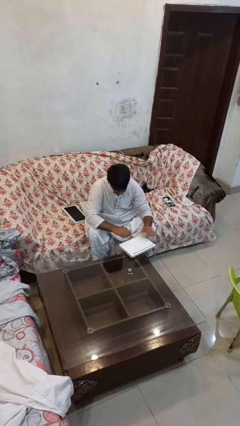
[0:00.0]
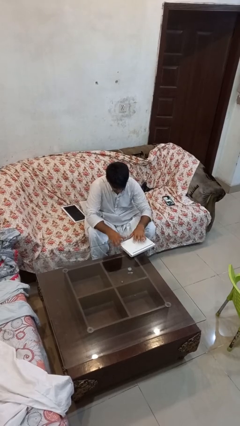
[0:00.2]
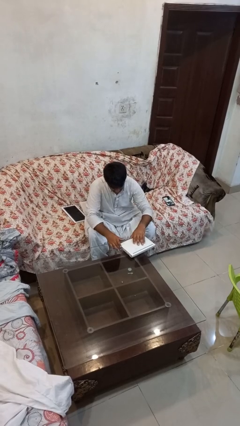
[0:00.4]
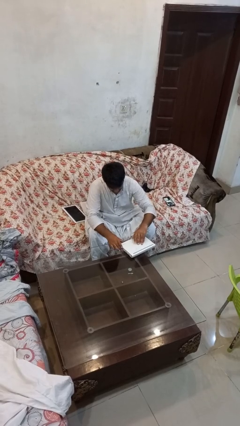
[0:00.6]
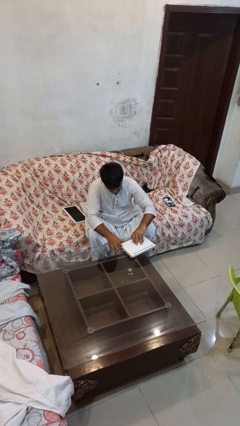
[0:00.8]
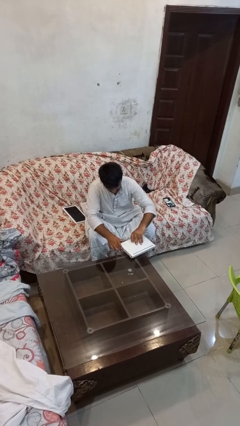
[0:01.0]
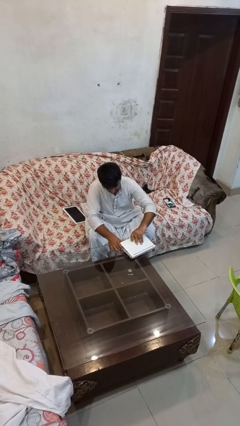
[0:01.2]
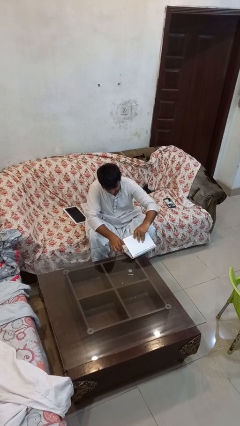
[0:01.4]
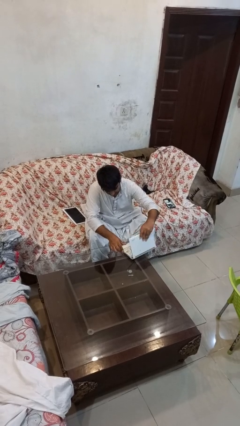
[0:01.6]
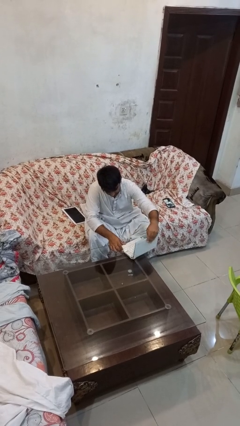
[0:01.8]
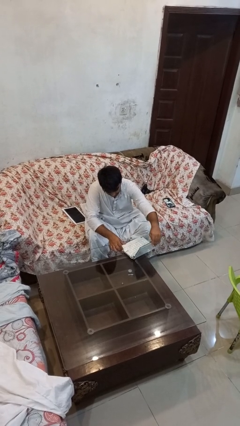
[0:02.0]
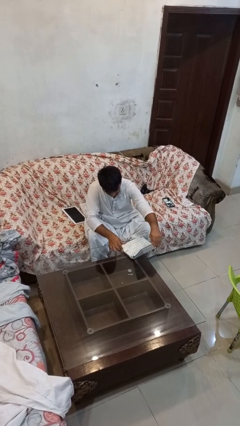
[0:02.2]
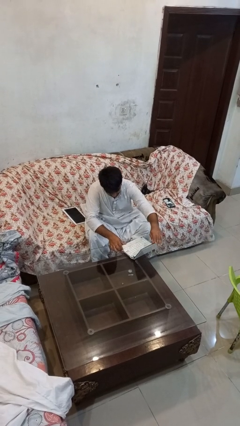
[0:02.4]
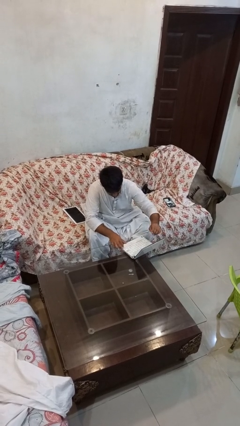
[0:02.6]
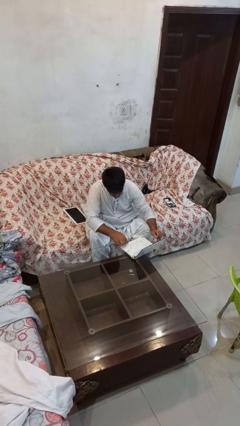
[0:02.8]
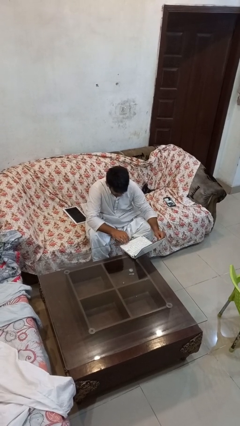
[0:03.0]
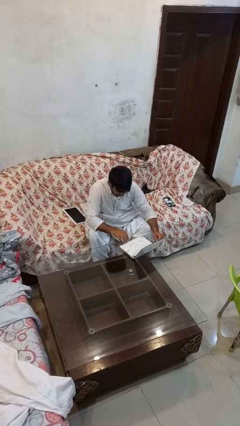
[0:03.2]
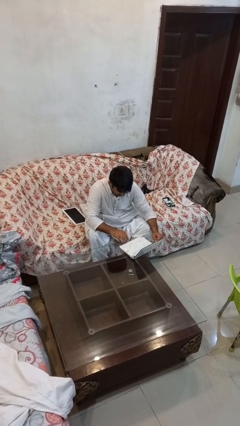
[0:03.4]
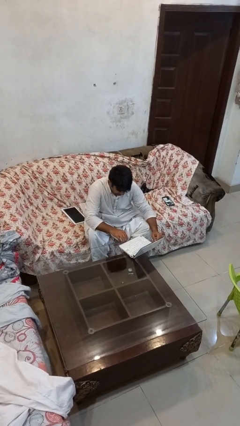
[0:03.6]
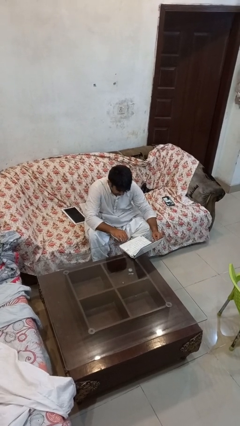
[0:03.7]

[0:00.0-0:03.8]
person opens laptop

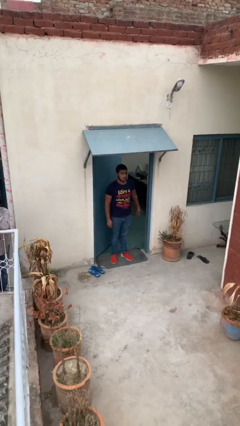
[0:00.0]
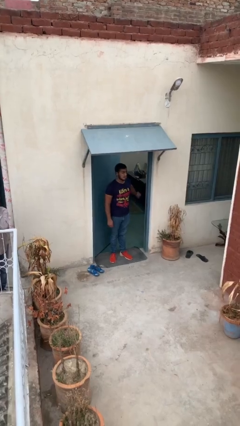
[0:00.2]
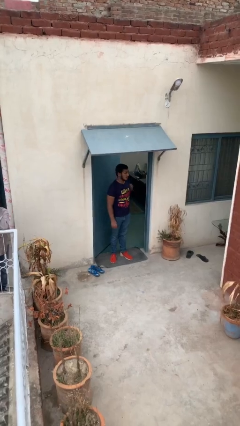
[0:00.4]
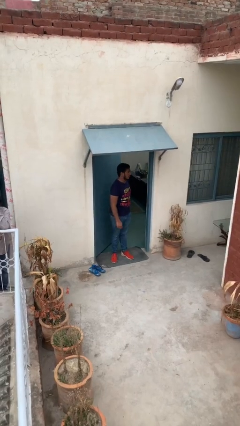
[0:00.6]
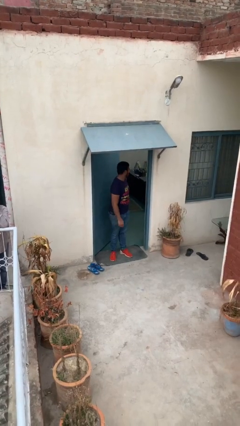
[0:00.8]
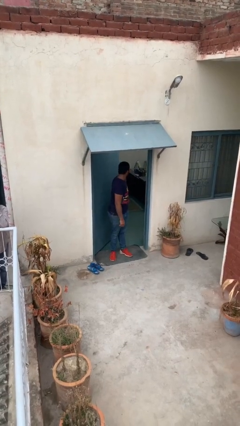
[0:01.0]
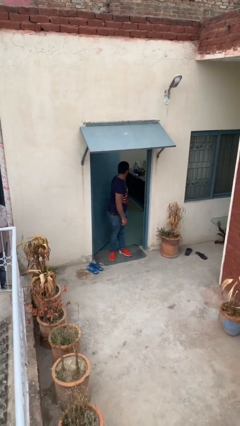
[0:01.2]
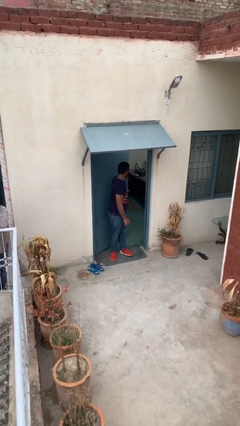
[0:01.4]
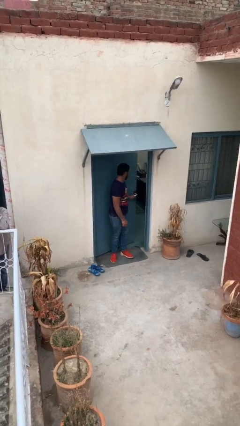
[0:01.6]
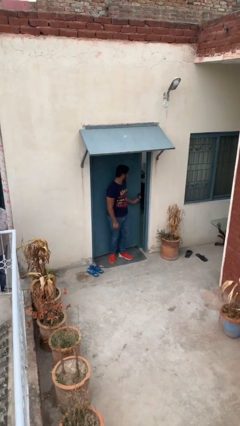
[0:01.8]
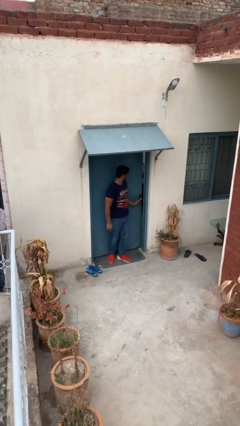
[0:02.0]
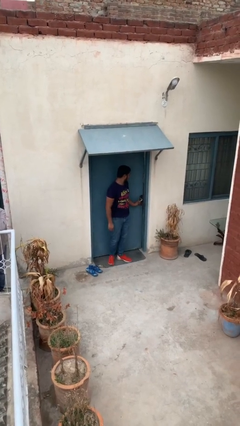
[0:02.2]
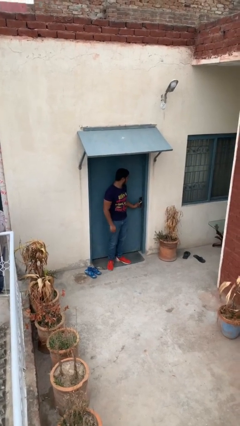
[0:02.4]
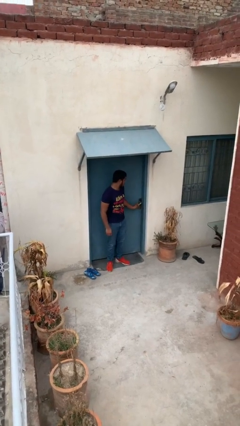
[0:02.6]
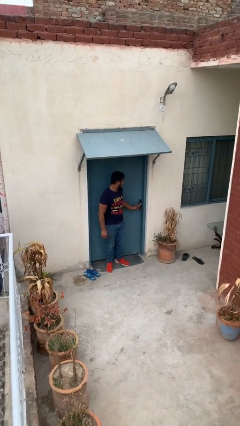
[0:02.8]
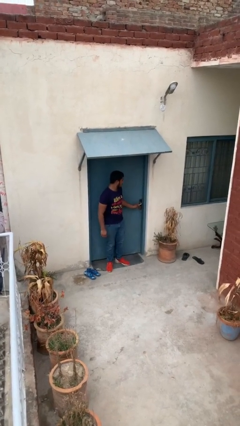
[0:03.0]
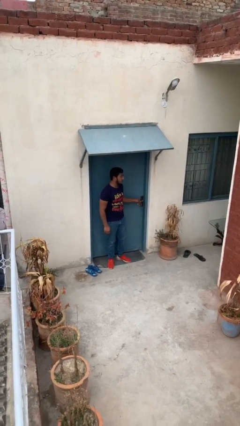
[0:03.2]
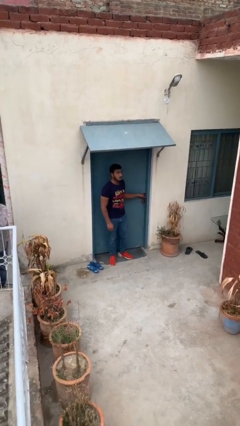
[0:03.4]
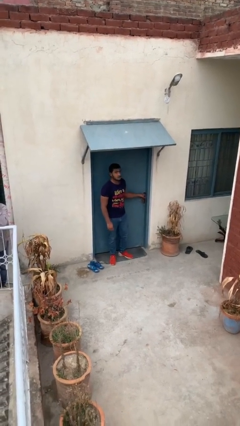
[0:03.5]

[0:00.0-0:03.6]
person closes facility door

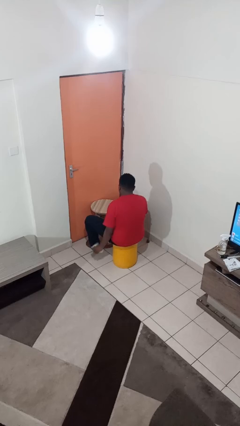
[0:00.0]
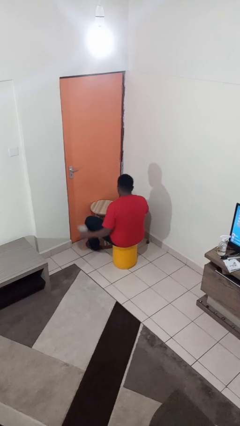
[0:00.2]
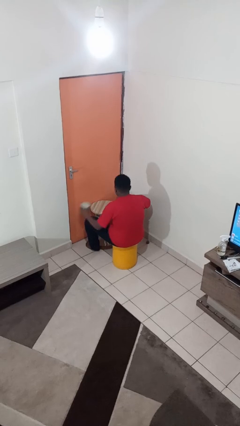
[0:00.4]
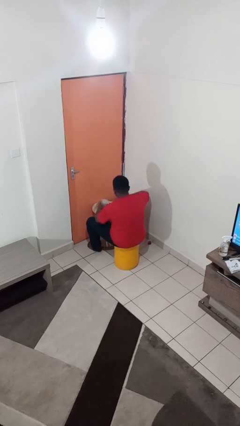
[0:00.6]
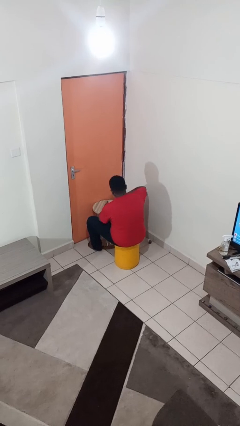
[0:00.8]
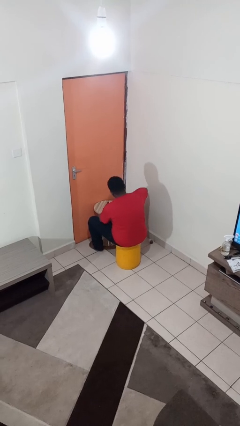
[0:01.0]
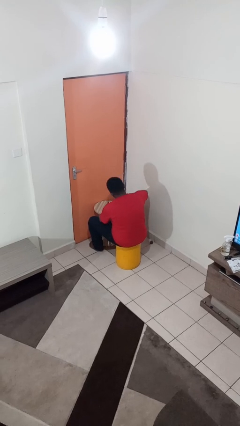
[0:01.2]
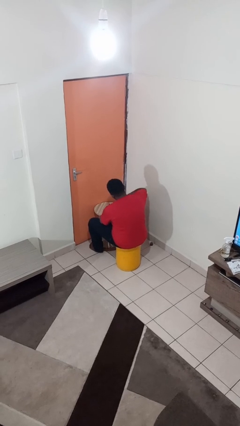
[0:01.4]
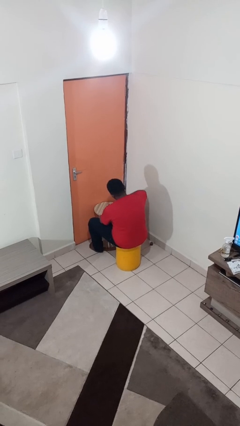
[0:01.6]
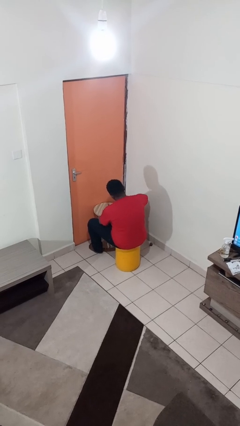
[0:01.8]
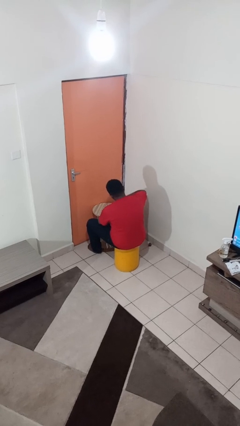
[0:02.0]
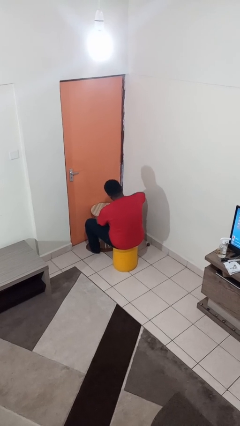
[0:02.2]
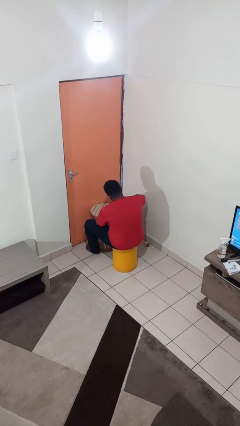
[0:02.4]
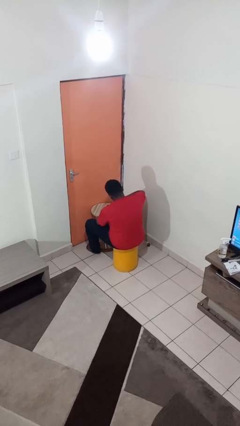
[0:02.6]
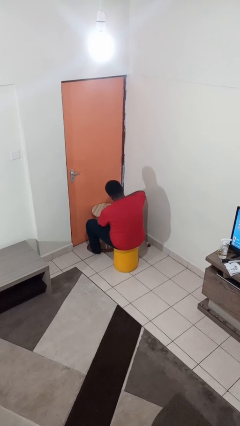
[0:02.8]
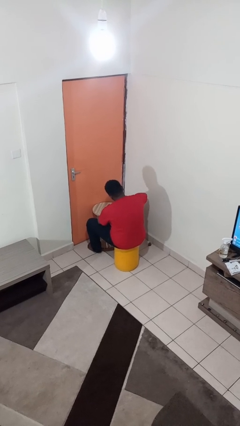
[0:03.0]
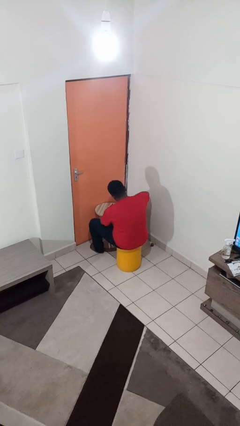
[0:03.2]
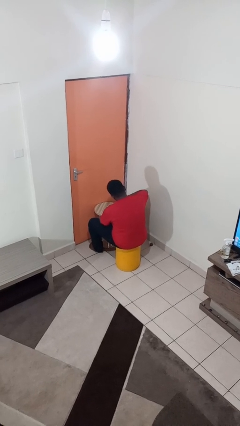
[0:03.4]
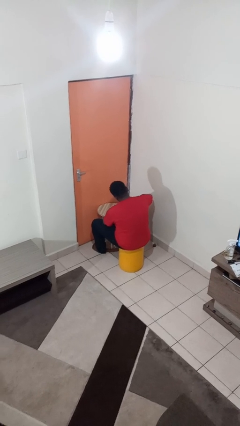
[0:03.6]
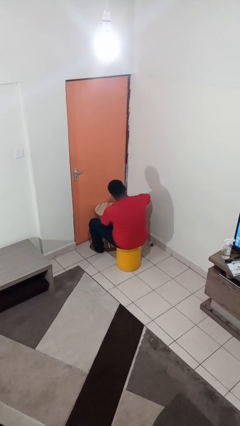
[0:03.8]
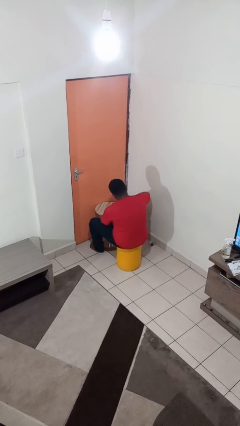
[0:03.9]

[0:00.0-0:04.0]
person opens can with can opener

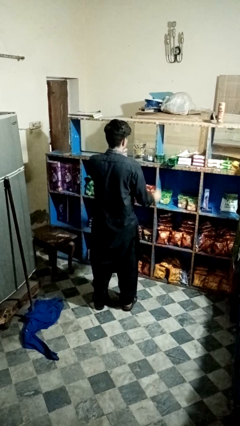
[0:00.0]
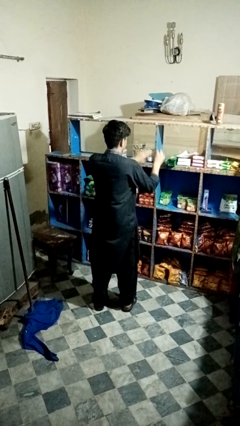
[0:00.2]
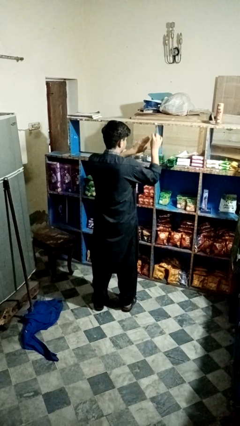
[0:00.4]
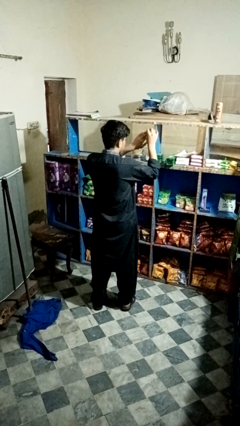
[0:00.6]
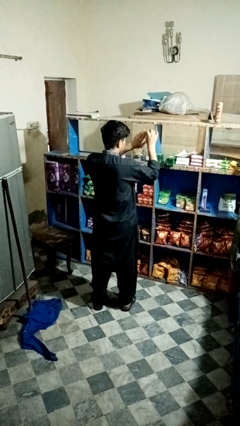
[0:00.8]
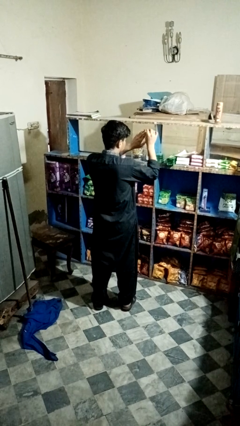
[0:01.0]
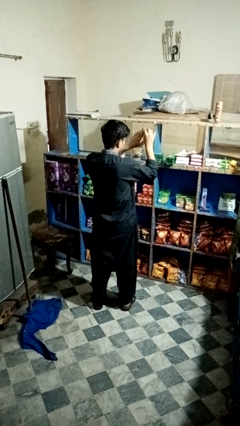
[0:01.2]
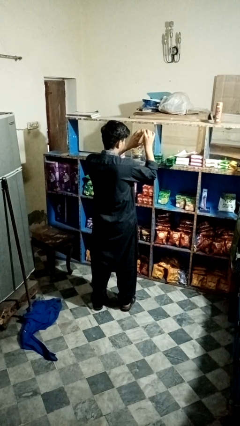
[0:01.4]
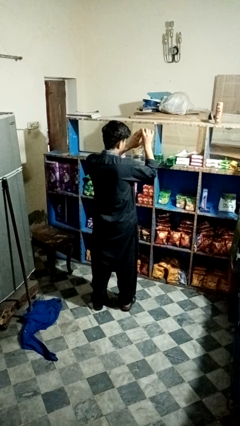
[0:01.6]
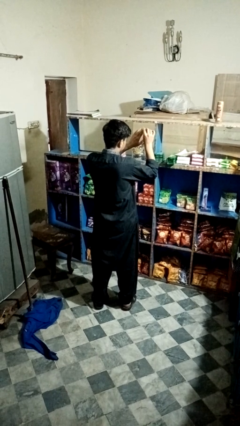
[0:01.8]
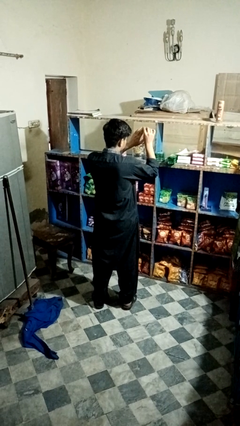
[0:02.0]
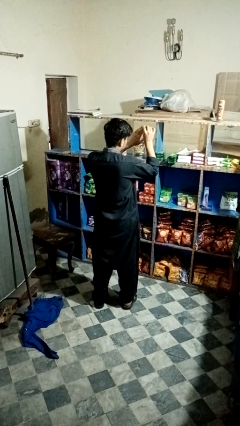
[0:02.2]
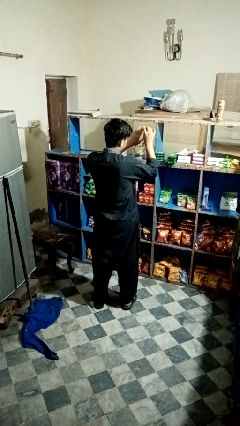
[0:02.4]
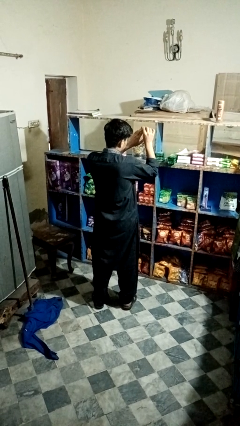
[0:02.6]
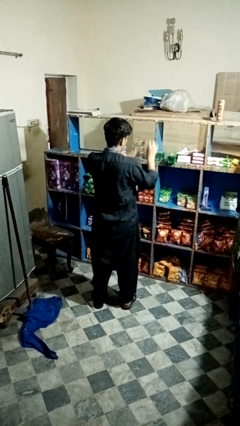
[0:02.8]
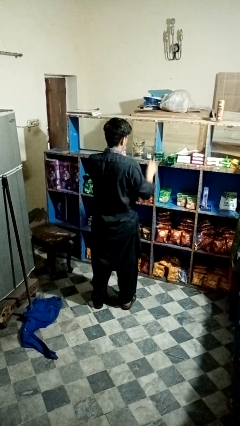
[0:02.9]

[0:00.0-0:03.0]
person files fingernails

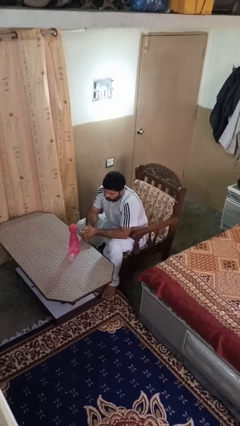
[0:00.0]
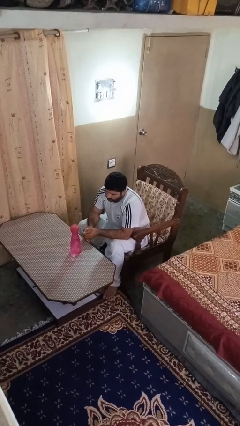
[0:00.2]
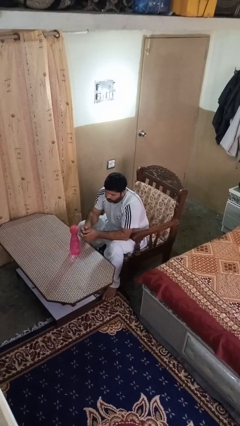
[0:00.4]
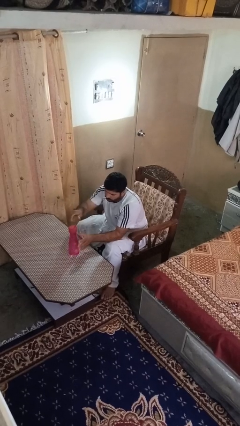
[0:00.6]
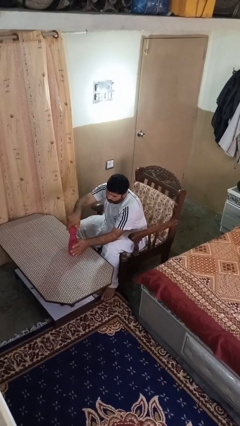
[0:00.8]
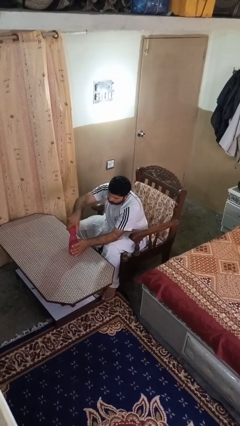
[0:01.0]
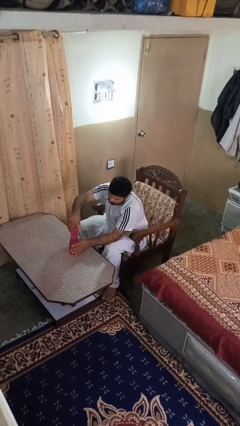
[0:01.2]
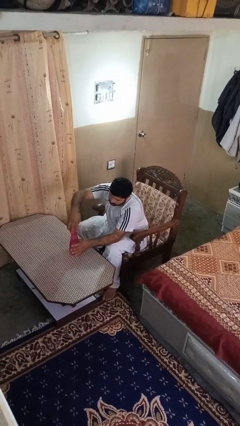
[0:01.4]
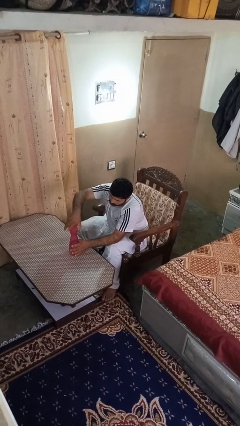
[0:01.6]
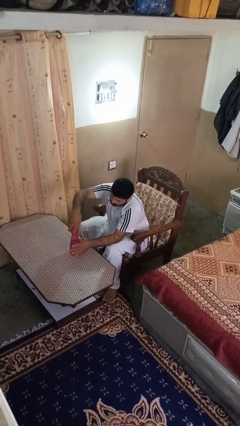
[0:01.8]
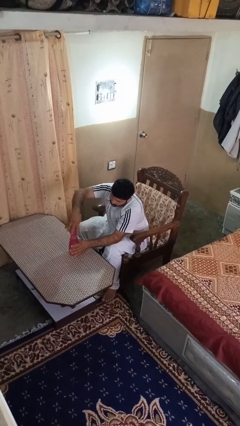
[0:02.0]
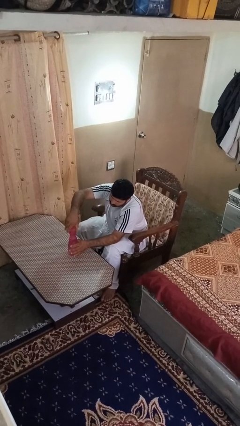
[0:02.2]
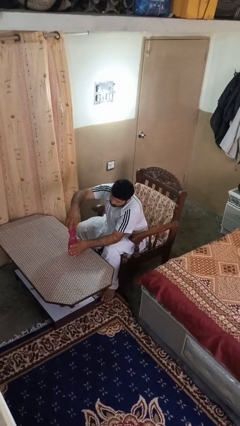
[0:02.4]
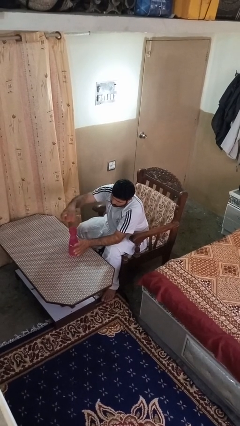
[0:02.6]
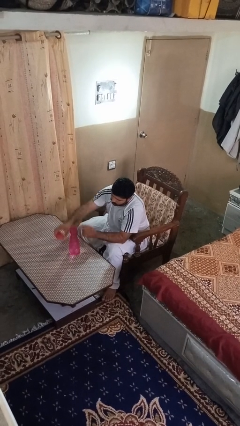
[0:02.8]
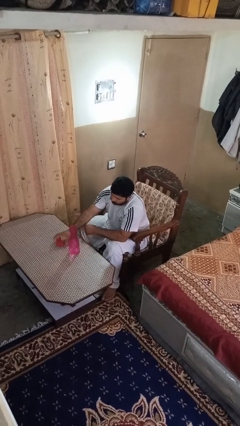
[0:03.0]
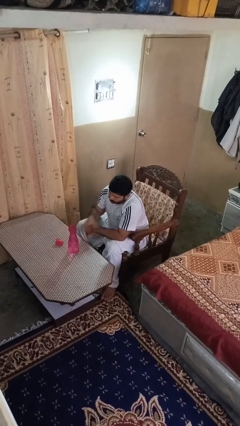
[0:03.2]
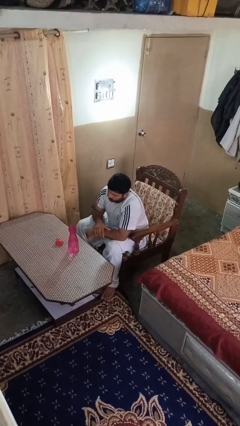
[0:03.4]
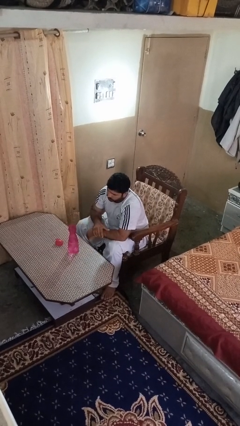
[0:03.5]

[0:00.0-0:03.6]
person unscrews lid from bottle
